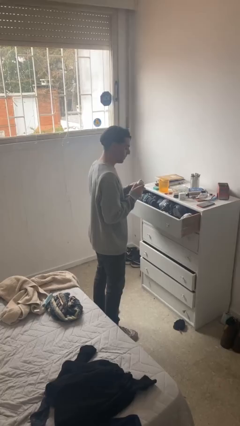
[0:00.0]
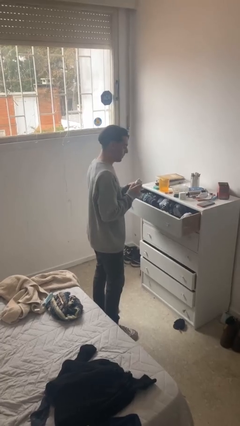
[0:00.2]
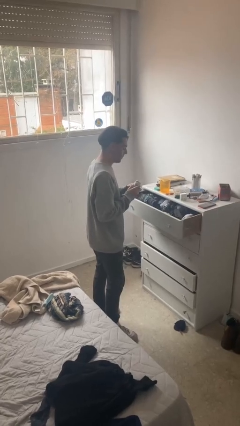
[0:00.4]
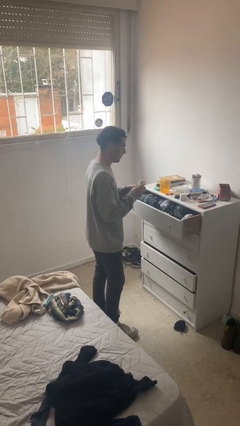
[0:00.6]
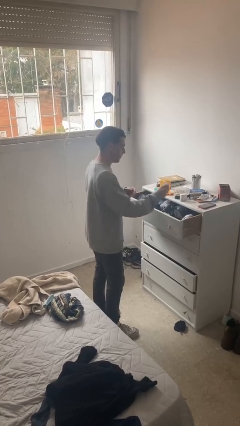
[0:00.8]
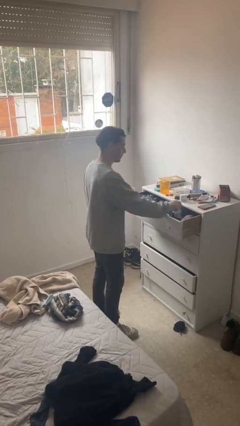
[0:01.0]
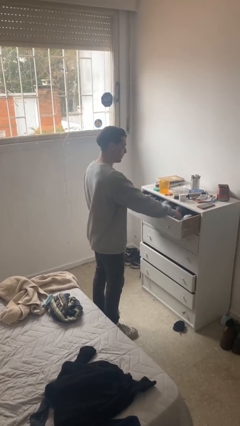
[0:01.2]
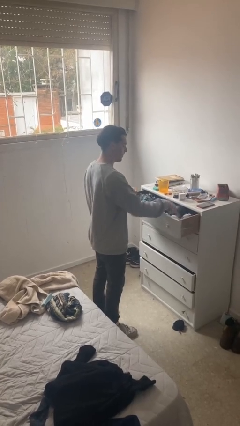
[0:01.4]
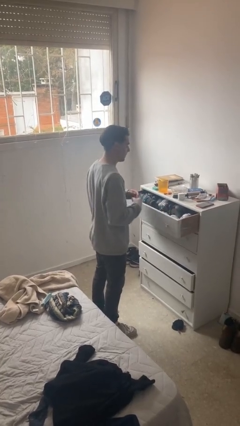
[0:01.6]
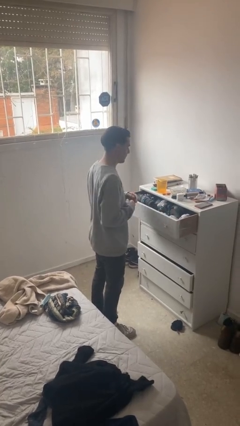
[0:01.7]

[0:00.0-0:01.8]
person puts clothes into dresser

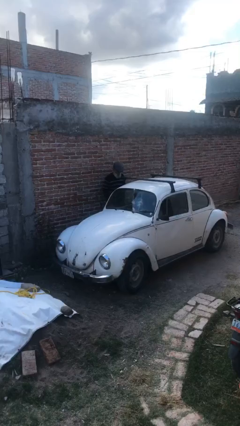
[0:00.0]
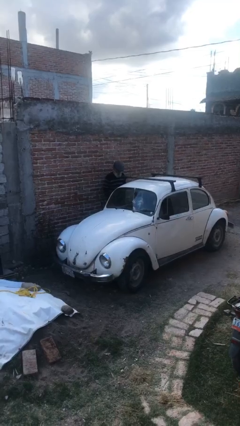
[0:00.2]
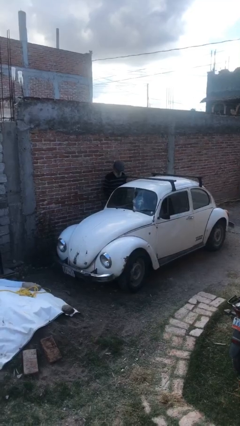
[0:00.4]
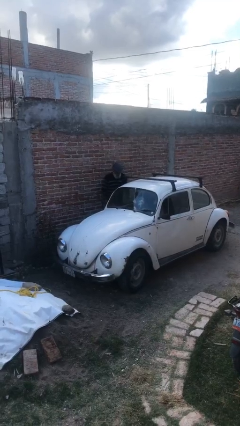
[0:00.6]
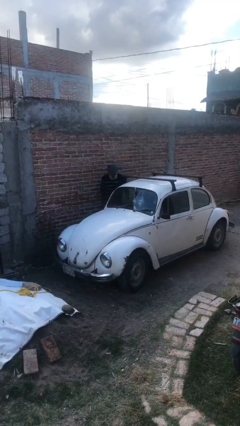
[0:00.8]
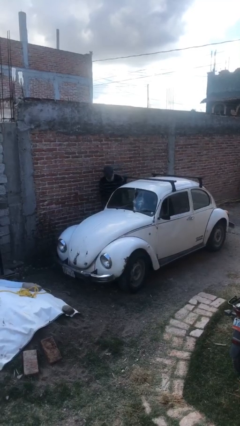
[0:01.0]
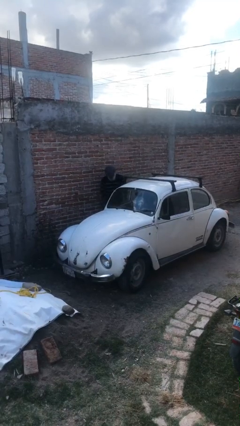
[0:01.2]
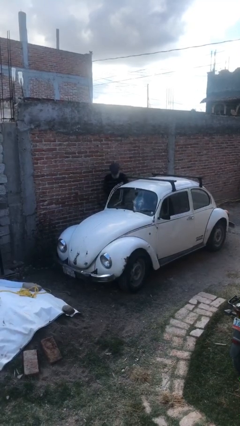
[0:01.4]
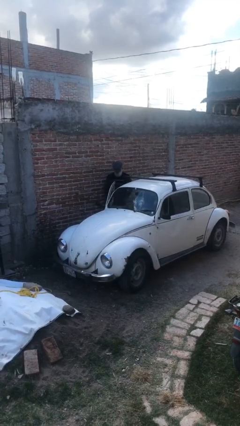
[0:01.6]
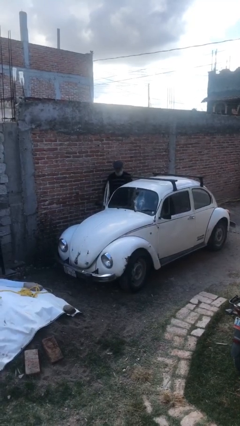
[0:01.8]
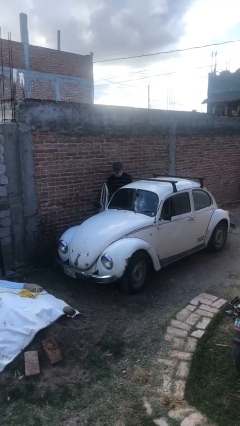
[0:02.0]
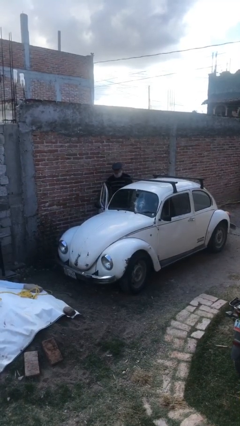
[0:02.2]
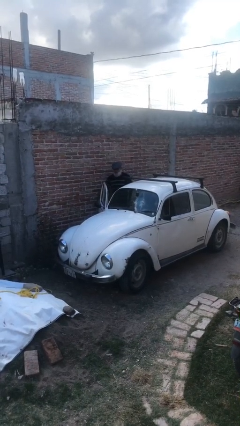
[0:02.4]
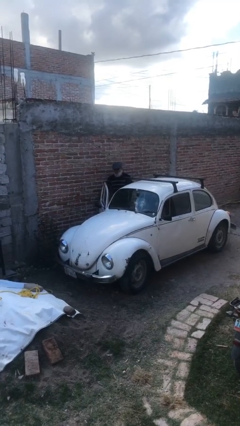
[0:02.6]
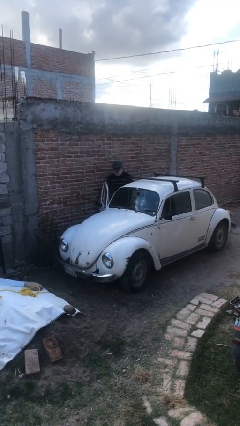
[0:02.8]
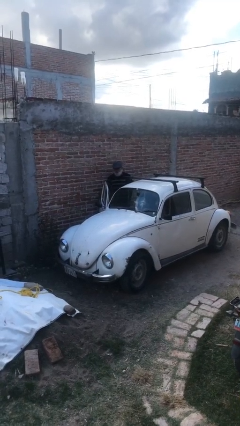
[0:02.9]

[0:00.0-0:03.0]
person opens car door

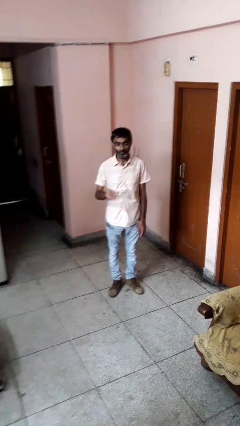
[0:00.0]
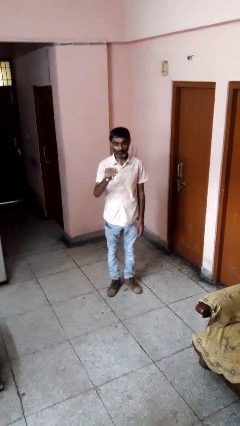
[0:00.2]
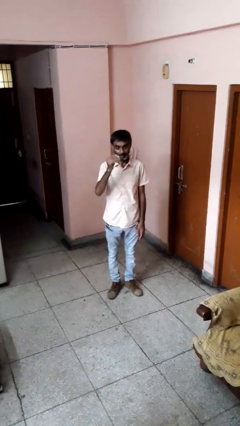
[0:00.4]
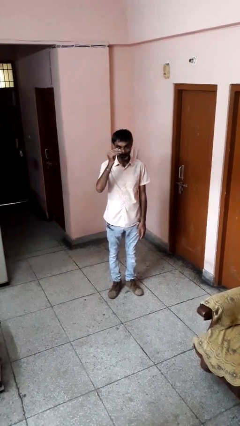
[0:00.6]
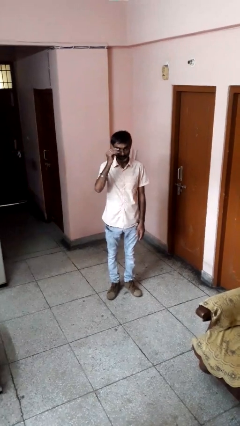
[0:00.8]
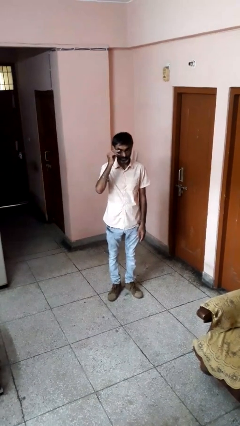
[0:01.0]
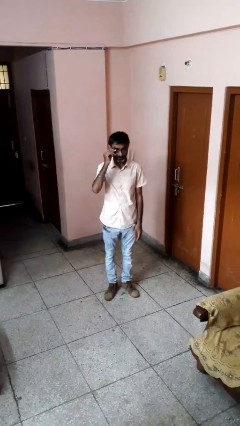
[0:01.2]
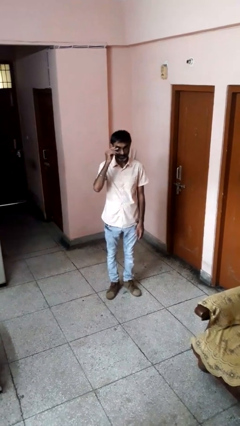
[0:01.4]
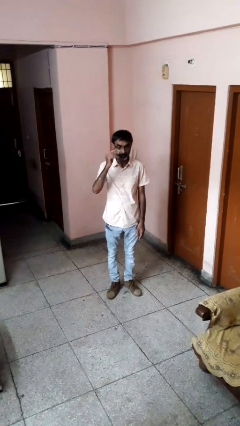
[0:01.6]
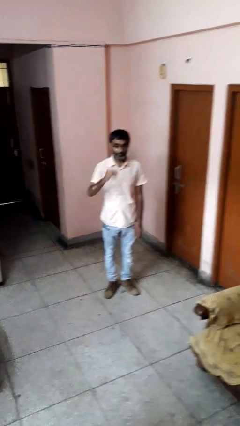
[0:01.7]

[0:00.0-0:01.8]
person puts on glasses

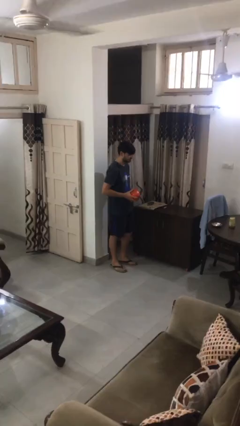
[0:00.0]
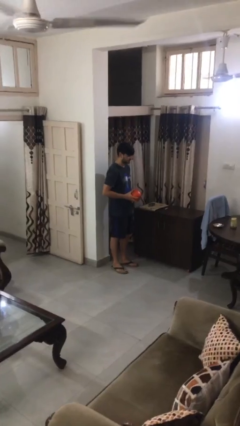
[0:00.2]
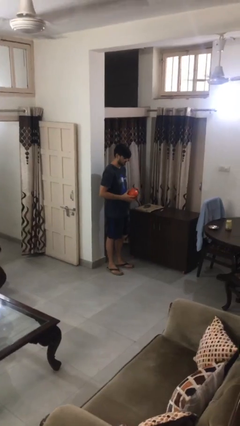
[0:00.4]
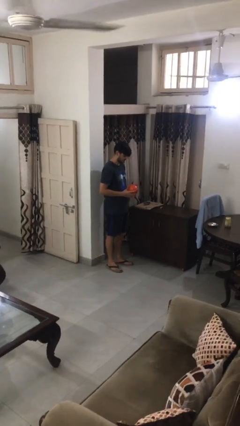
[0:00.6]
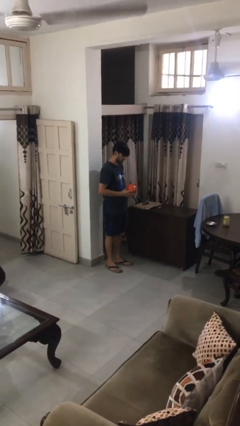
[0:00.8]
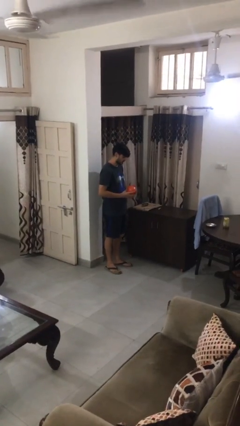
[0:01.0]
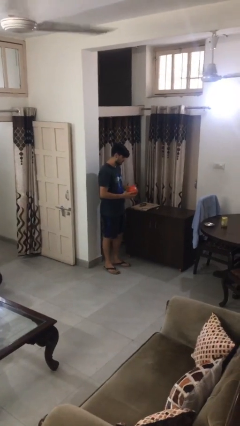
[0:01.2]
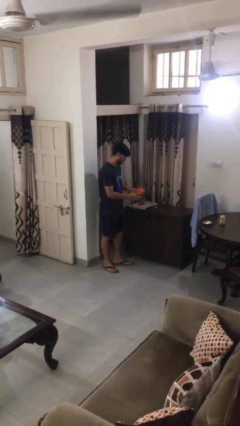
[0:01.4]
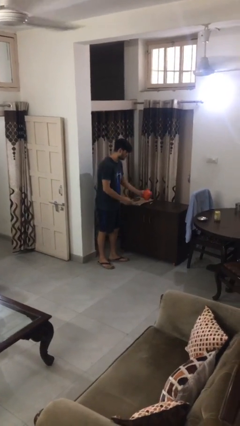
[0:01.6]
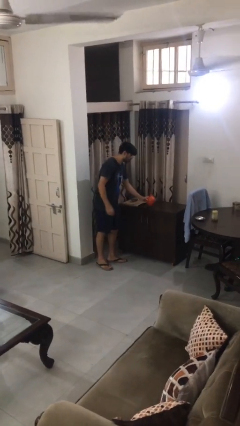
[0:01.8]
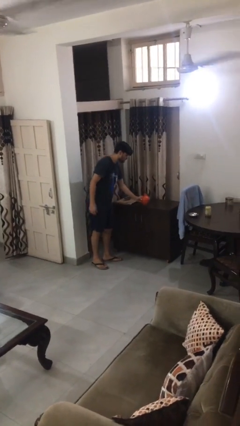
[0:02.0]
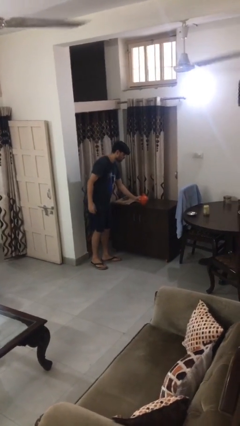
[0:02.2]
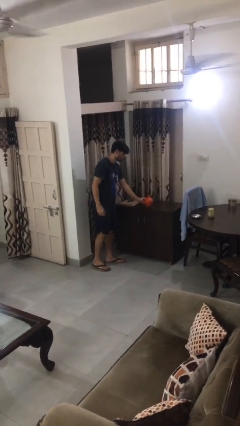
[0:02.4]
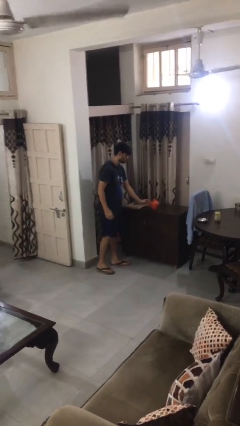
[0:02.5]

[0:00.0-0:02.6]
person puts down object on countertop

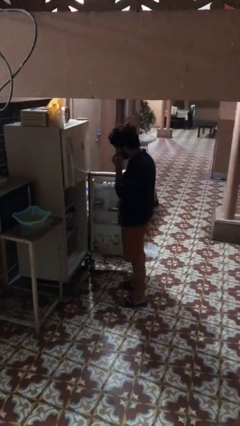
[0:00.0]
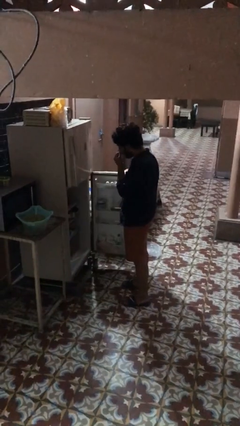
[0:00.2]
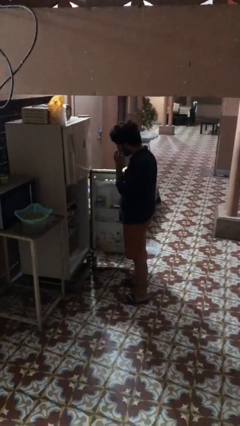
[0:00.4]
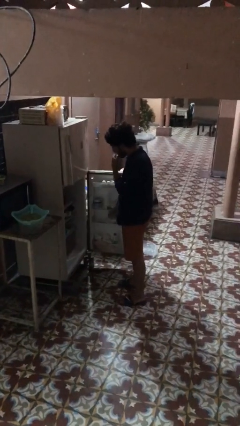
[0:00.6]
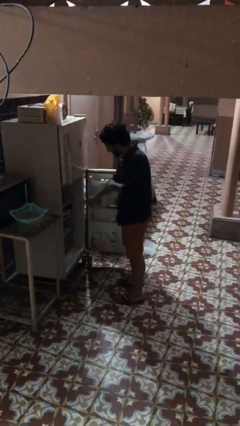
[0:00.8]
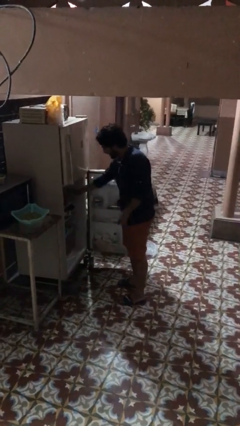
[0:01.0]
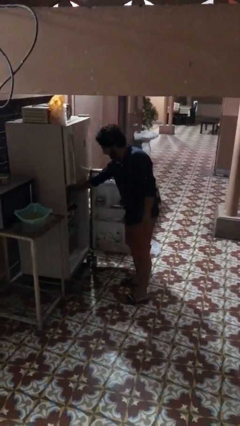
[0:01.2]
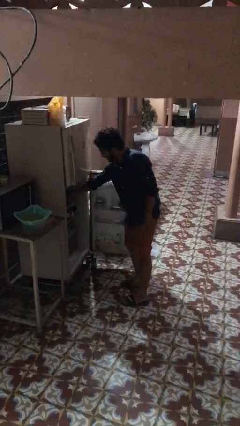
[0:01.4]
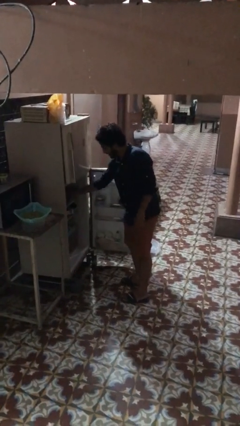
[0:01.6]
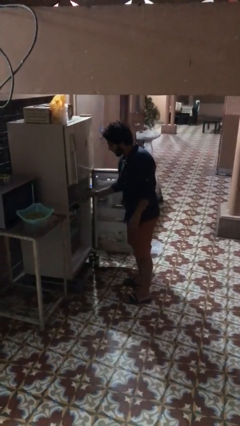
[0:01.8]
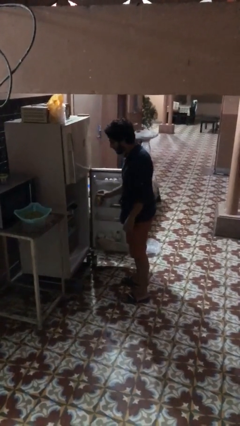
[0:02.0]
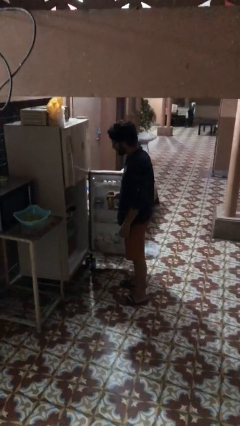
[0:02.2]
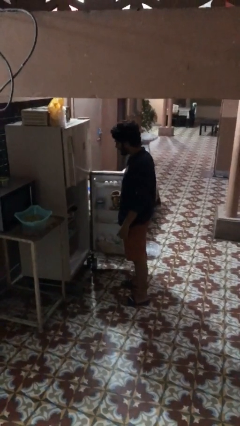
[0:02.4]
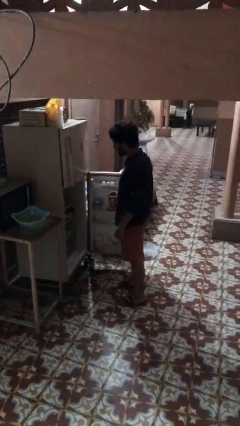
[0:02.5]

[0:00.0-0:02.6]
person takes object from refrigerator

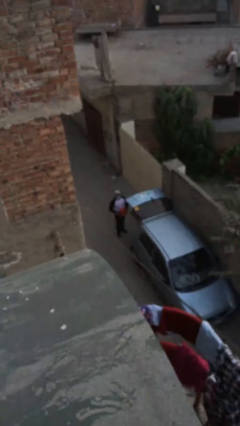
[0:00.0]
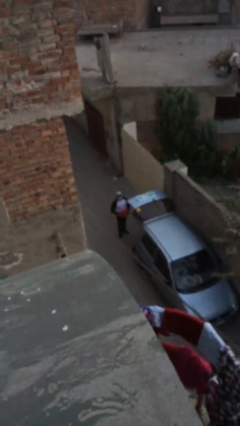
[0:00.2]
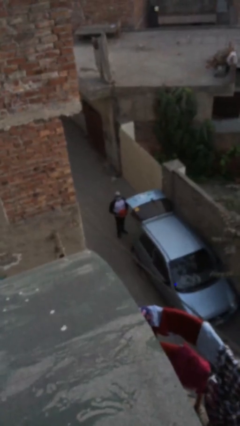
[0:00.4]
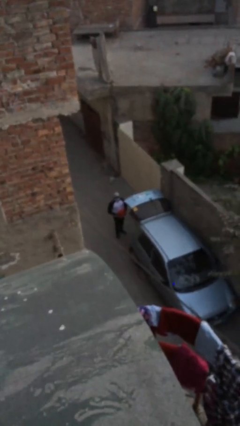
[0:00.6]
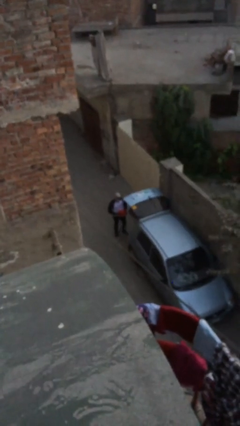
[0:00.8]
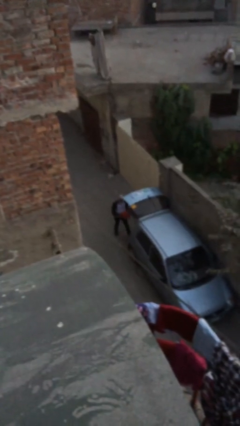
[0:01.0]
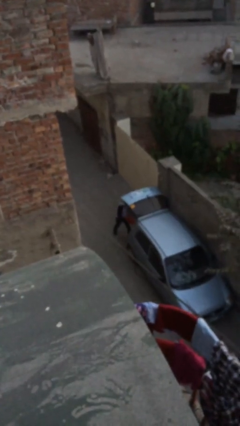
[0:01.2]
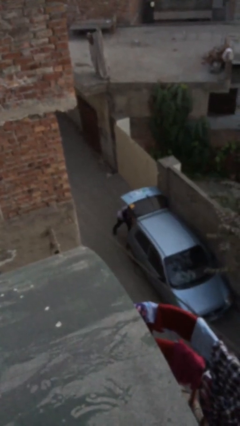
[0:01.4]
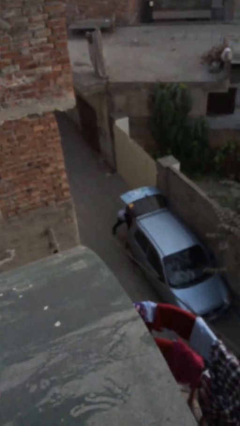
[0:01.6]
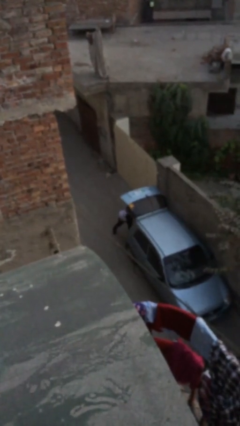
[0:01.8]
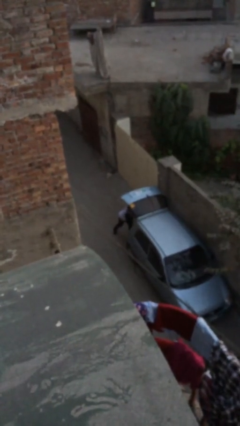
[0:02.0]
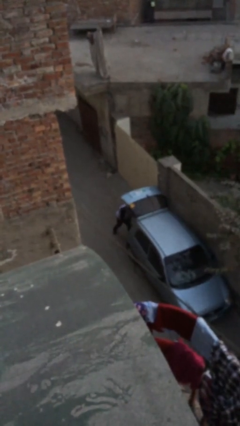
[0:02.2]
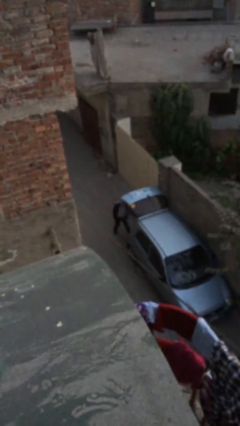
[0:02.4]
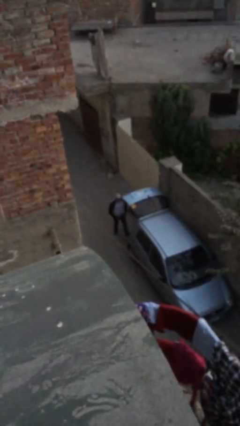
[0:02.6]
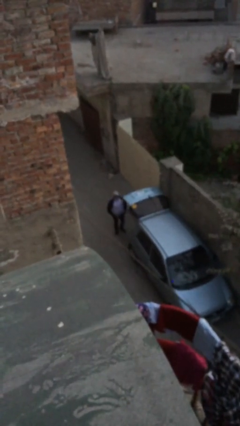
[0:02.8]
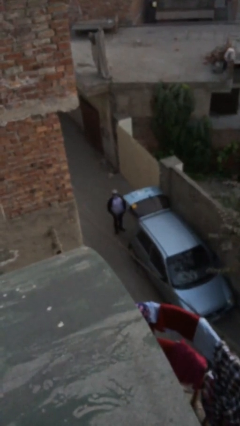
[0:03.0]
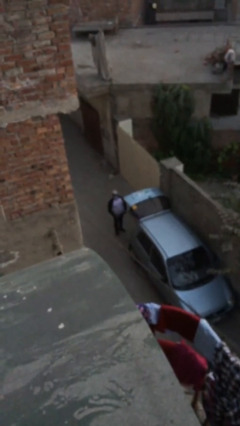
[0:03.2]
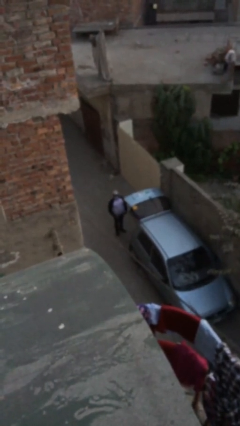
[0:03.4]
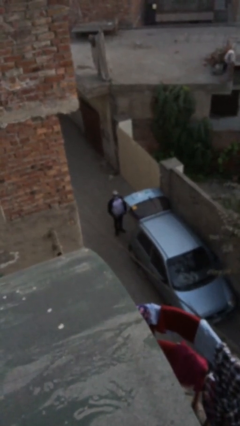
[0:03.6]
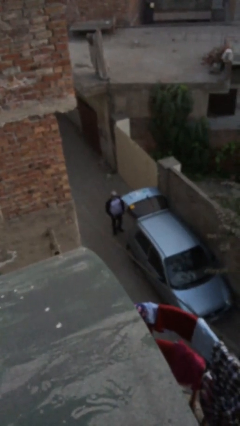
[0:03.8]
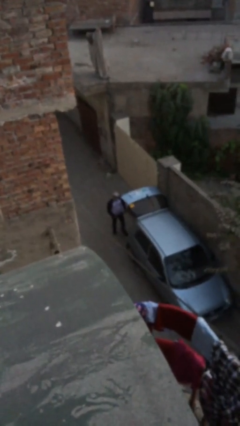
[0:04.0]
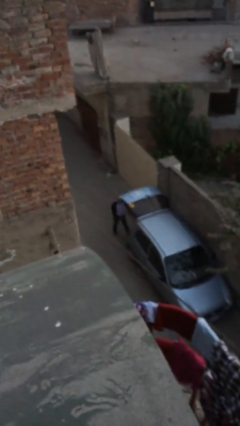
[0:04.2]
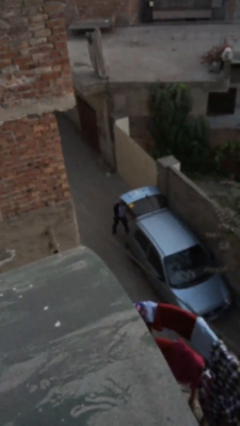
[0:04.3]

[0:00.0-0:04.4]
person loads car

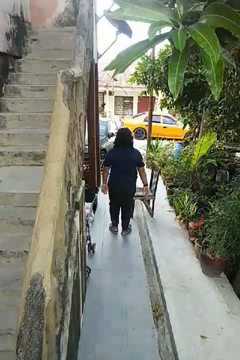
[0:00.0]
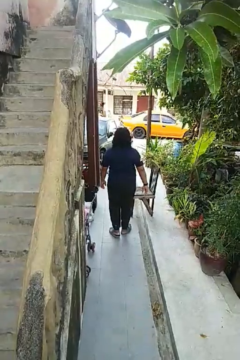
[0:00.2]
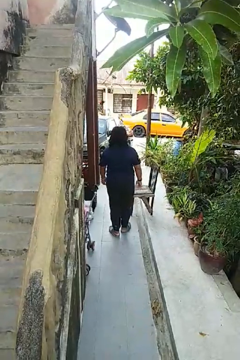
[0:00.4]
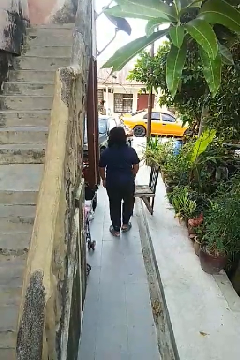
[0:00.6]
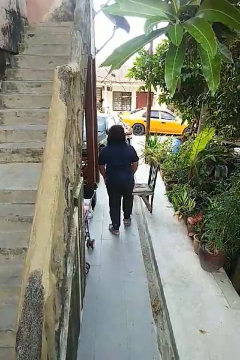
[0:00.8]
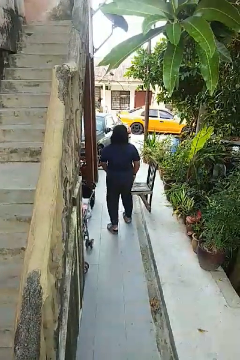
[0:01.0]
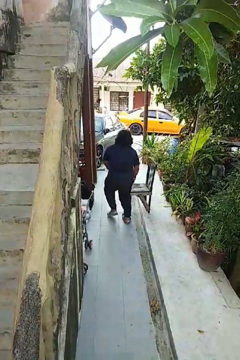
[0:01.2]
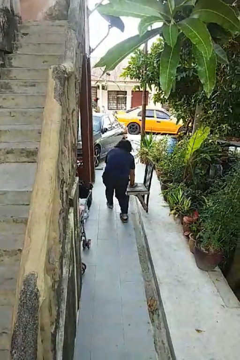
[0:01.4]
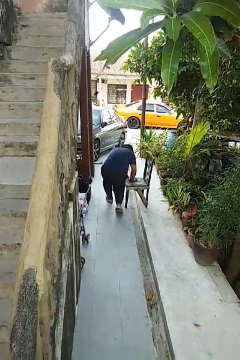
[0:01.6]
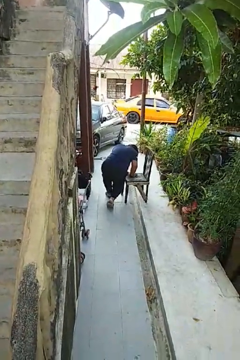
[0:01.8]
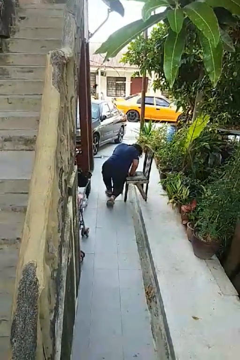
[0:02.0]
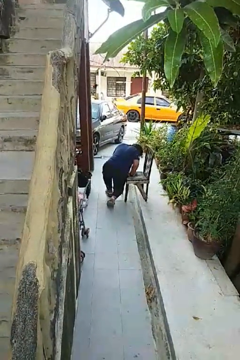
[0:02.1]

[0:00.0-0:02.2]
person trips on object on floor
